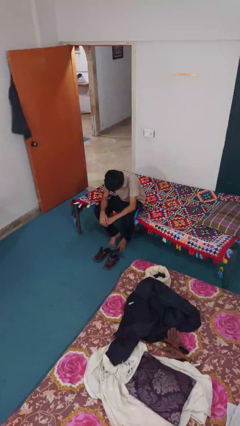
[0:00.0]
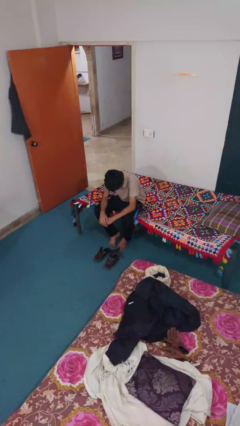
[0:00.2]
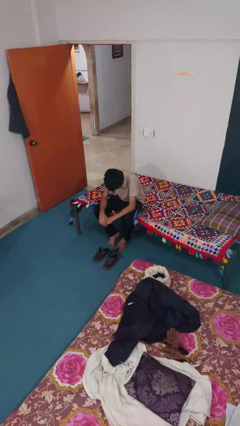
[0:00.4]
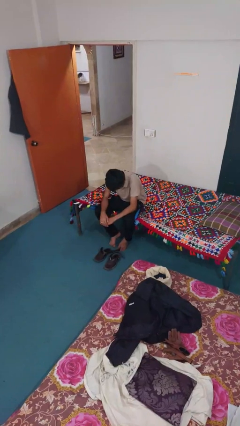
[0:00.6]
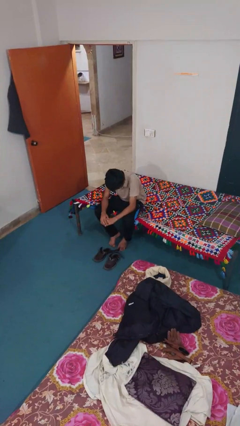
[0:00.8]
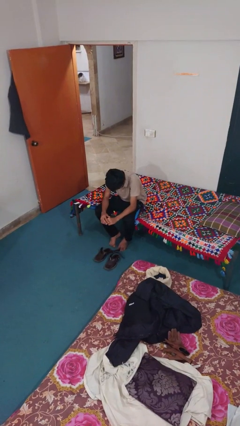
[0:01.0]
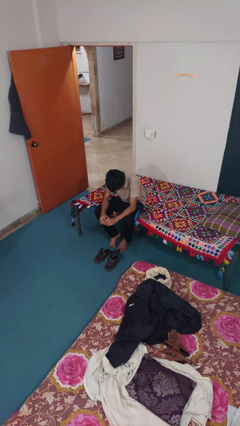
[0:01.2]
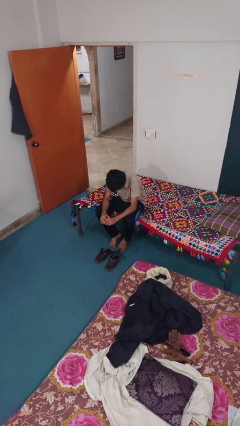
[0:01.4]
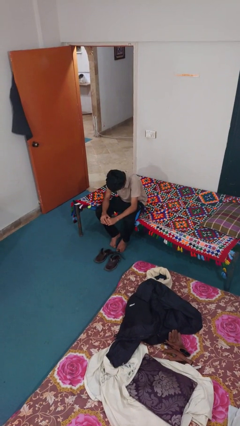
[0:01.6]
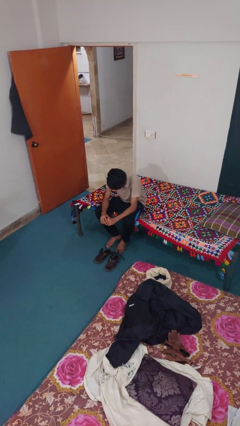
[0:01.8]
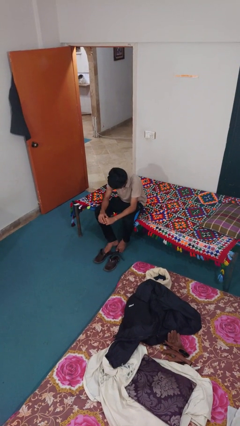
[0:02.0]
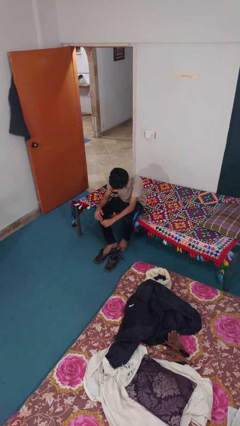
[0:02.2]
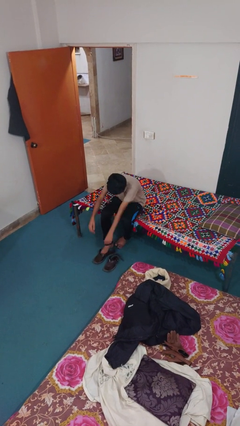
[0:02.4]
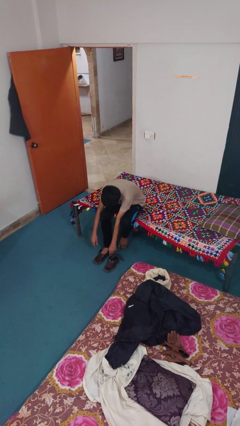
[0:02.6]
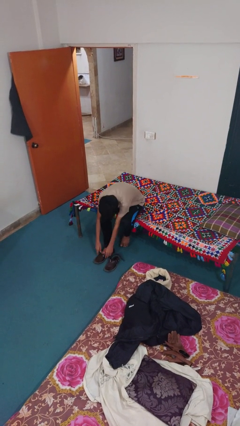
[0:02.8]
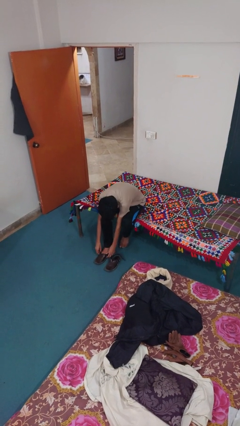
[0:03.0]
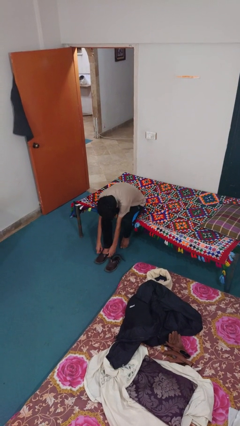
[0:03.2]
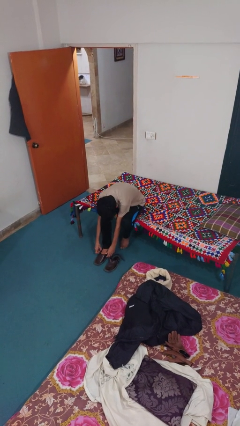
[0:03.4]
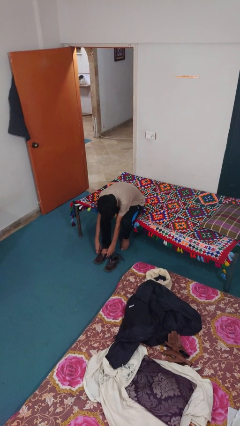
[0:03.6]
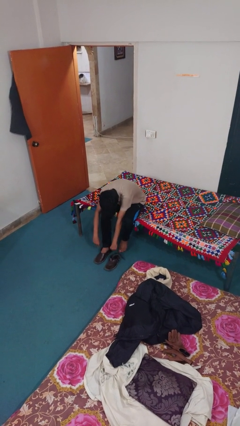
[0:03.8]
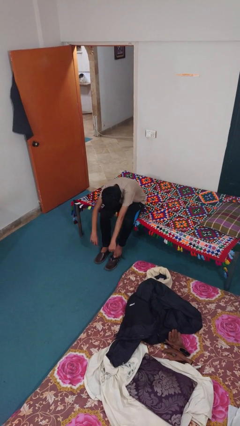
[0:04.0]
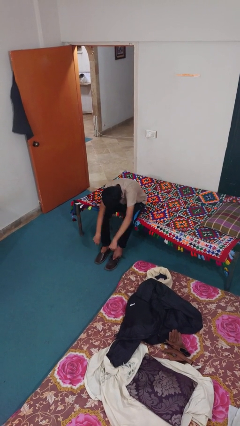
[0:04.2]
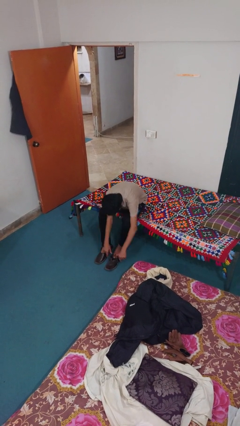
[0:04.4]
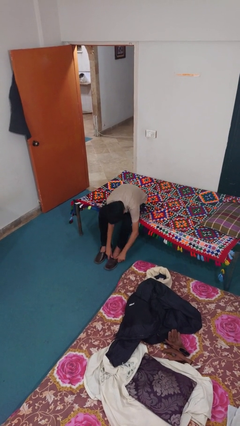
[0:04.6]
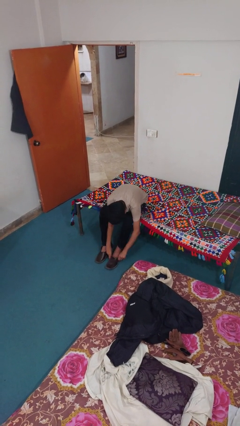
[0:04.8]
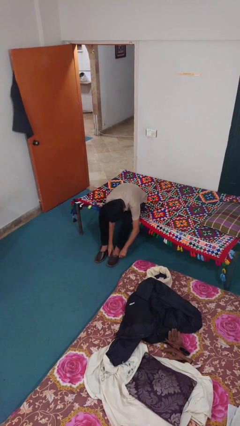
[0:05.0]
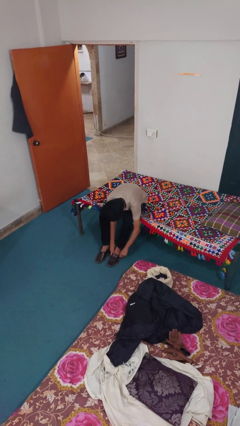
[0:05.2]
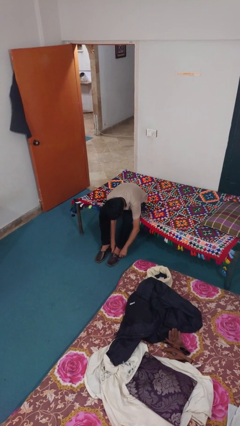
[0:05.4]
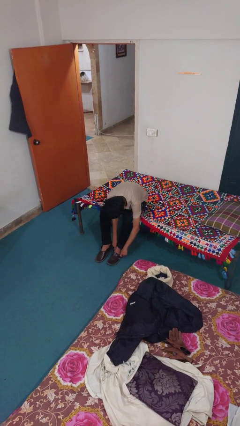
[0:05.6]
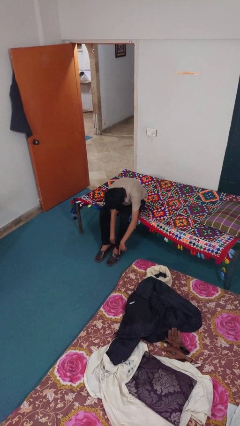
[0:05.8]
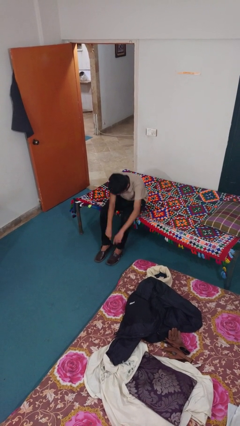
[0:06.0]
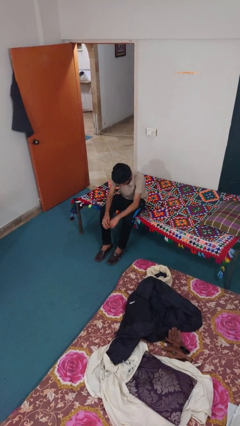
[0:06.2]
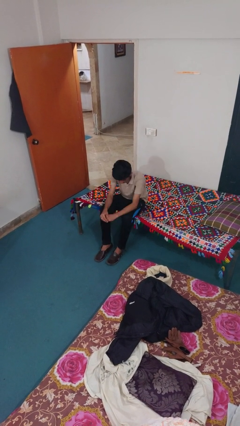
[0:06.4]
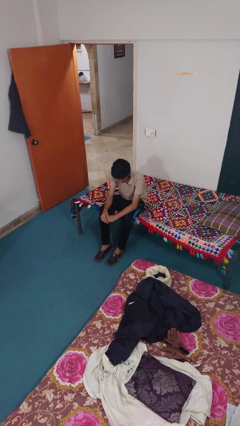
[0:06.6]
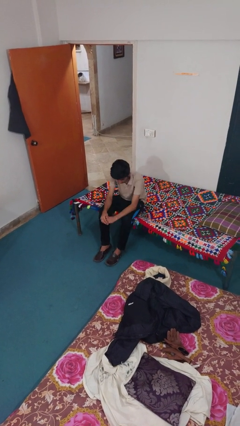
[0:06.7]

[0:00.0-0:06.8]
person puts on shoes

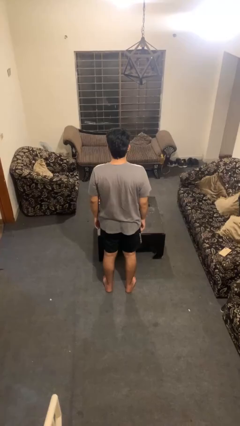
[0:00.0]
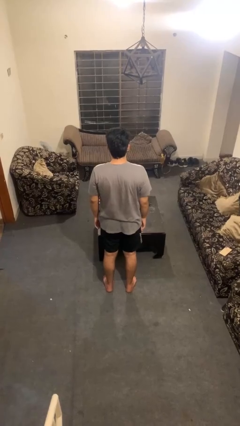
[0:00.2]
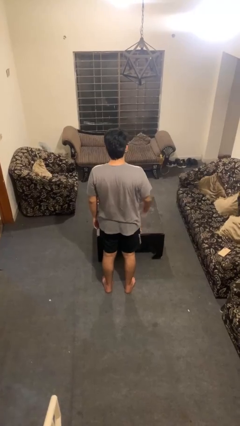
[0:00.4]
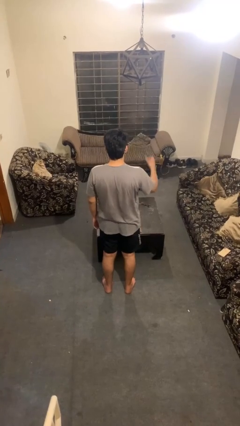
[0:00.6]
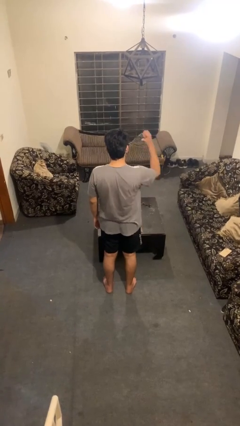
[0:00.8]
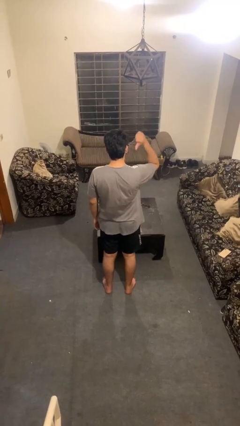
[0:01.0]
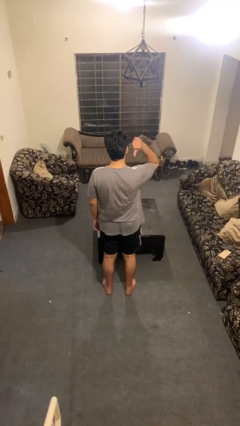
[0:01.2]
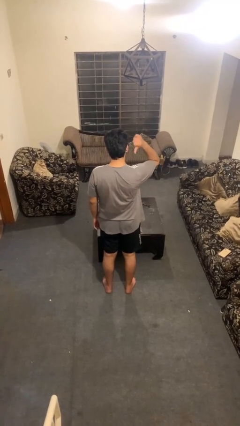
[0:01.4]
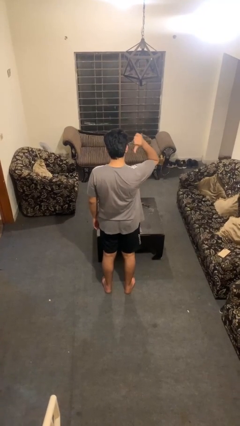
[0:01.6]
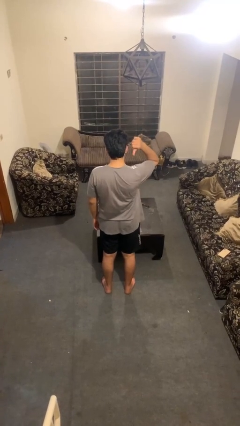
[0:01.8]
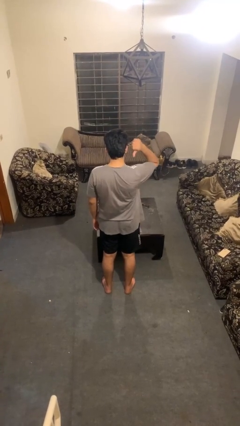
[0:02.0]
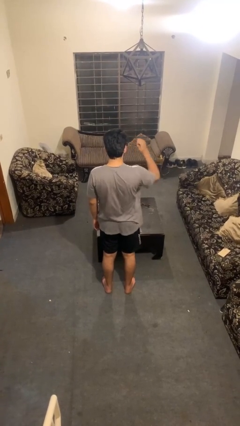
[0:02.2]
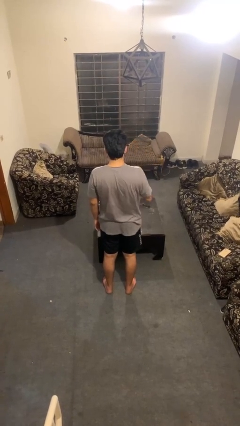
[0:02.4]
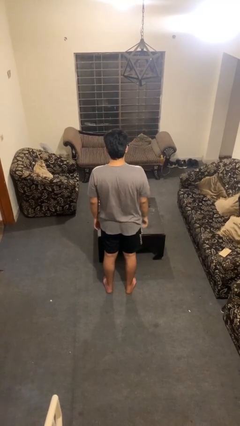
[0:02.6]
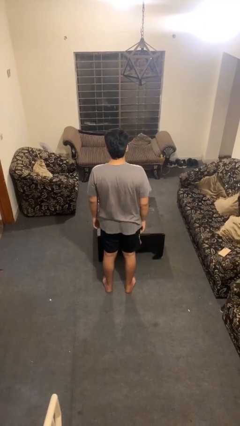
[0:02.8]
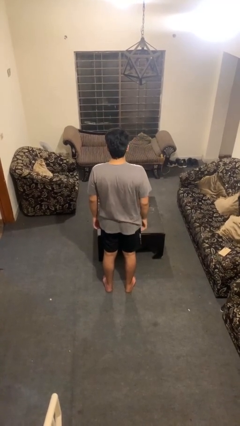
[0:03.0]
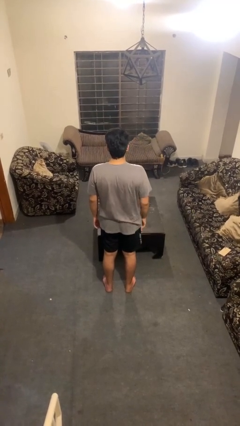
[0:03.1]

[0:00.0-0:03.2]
person gestures behind me

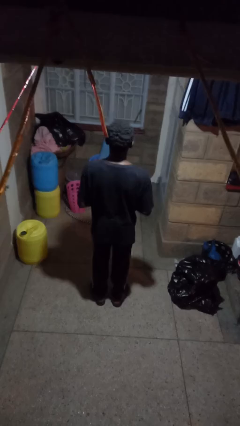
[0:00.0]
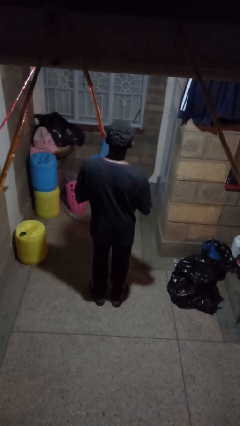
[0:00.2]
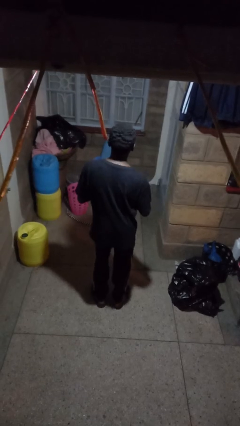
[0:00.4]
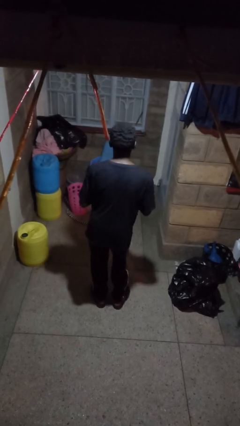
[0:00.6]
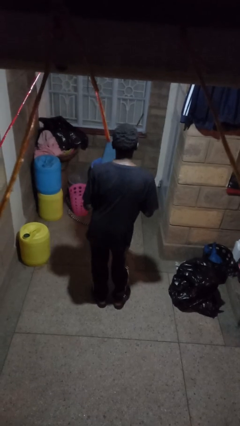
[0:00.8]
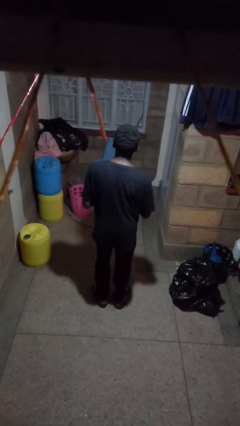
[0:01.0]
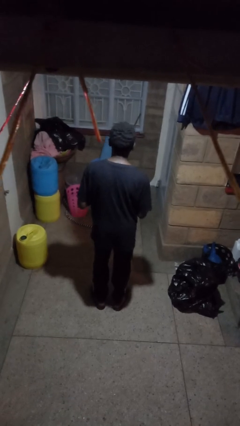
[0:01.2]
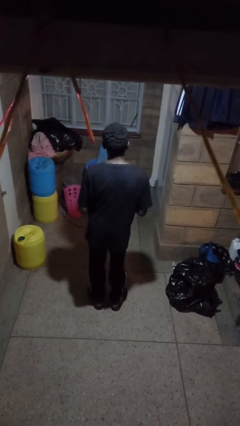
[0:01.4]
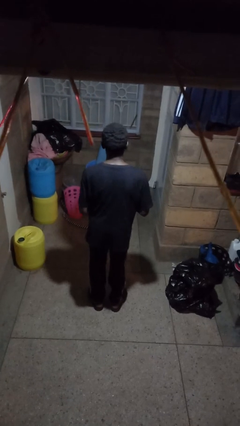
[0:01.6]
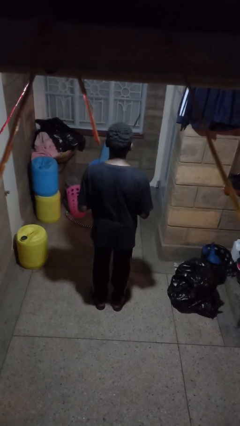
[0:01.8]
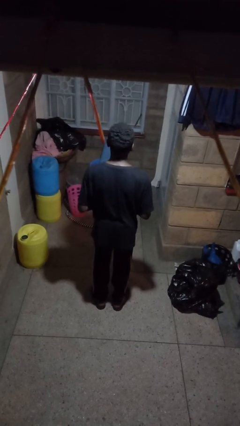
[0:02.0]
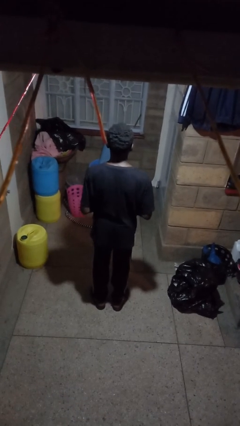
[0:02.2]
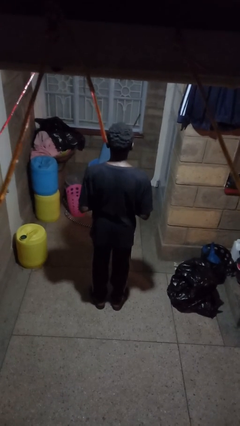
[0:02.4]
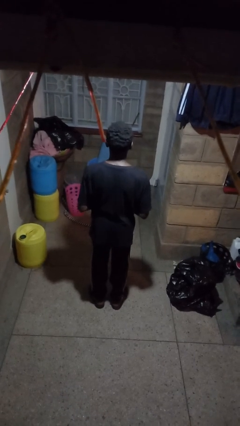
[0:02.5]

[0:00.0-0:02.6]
person wiggles hips

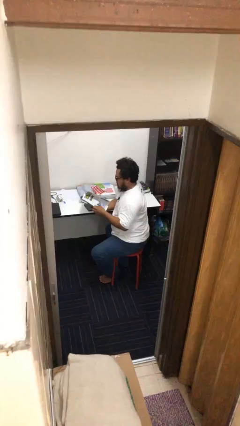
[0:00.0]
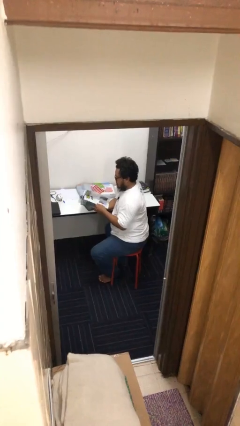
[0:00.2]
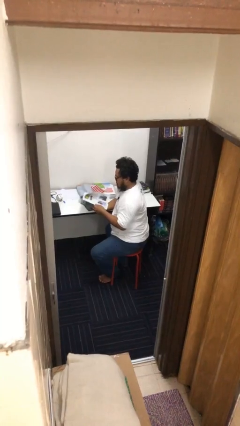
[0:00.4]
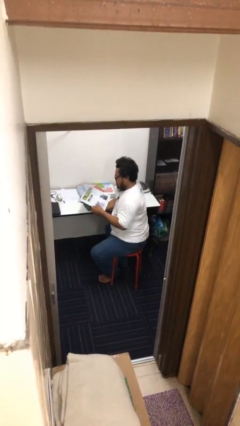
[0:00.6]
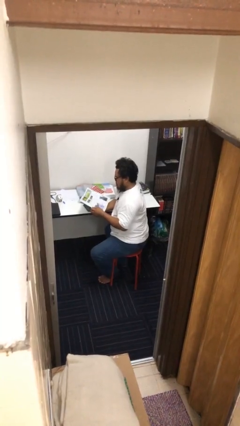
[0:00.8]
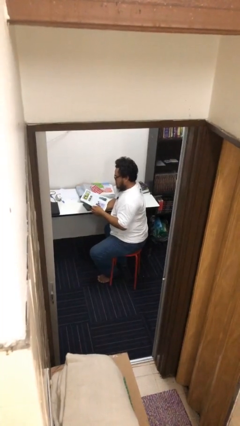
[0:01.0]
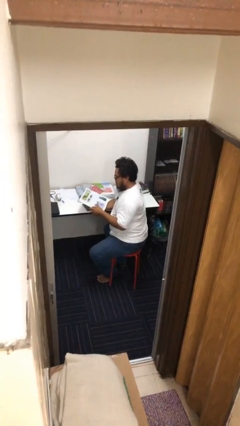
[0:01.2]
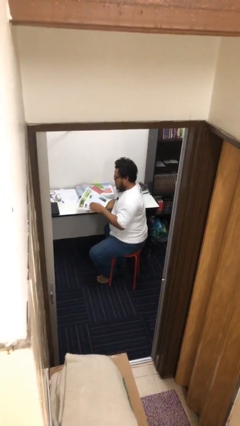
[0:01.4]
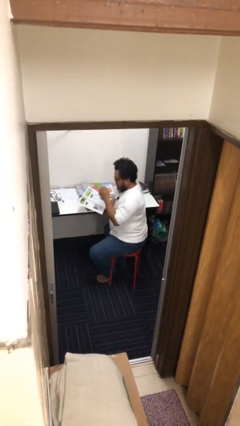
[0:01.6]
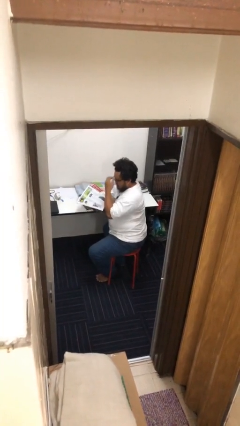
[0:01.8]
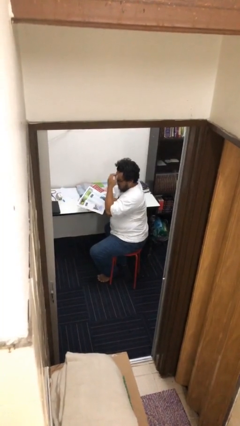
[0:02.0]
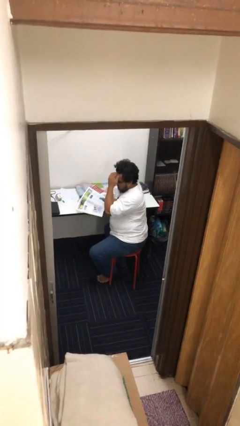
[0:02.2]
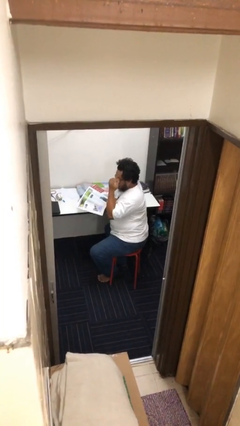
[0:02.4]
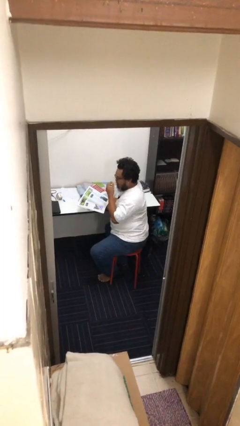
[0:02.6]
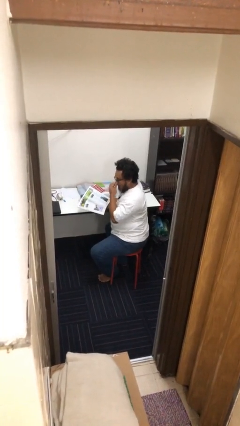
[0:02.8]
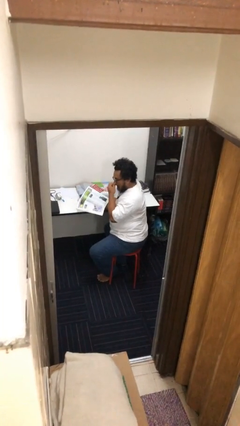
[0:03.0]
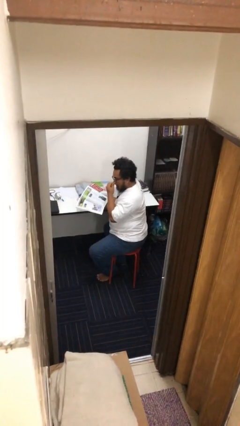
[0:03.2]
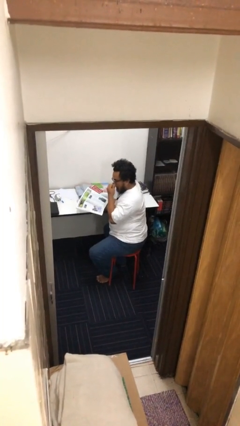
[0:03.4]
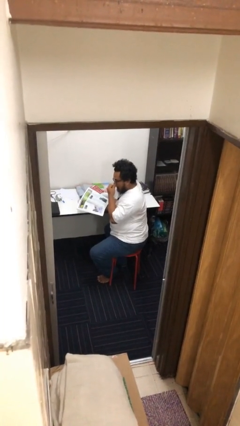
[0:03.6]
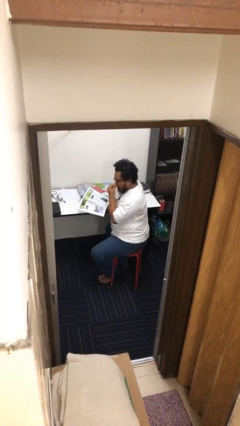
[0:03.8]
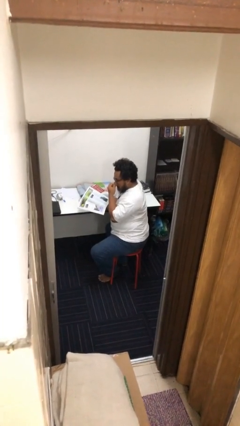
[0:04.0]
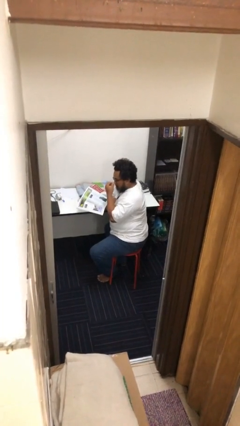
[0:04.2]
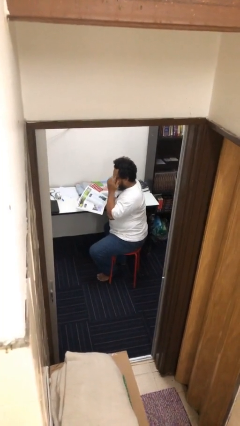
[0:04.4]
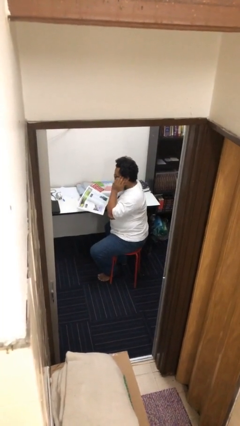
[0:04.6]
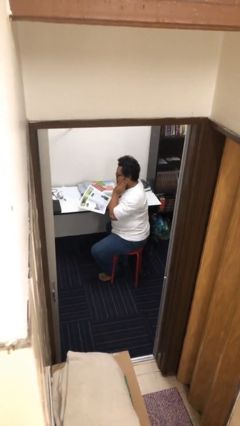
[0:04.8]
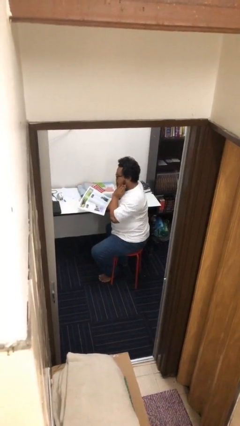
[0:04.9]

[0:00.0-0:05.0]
person reads document

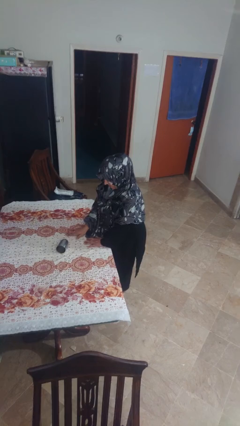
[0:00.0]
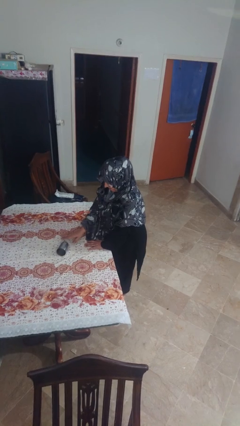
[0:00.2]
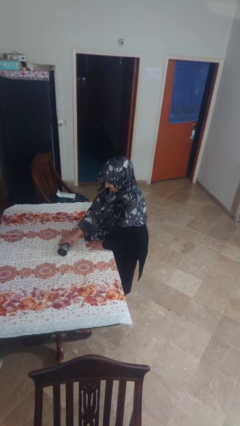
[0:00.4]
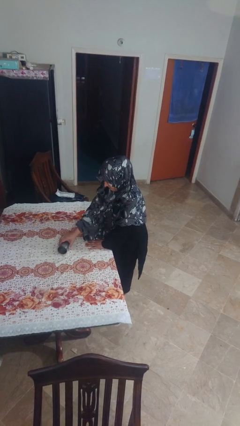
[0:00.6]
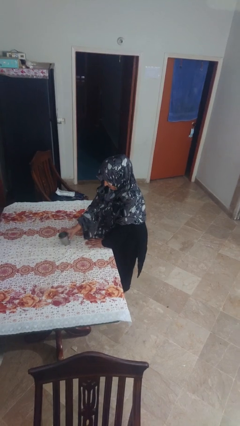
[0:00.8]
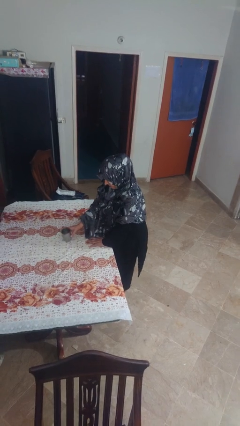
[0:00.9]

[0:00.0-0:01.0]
person sets upright glass
